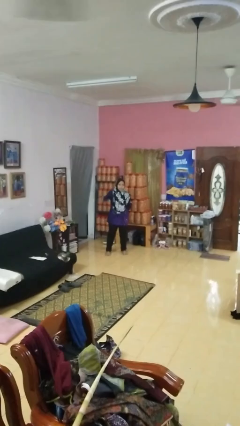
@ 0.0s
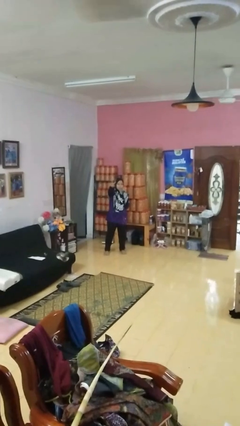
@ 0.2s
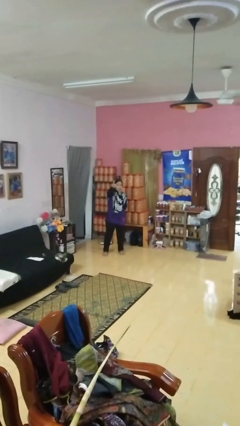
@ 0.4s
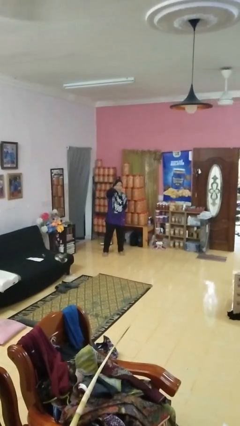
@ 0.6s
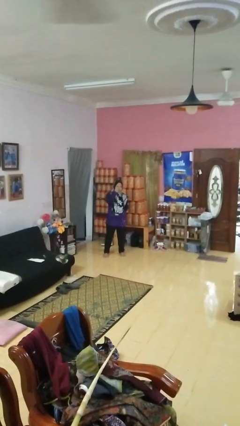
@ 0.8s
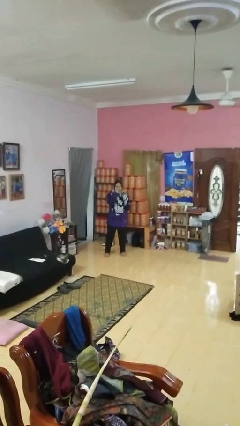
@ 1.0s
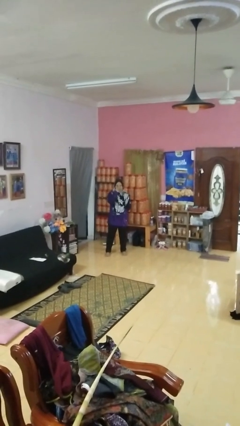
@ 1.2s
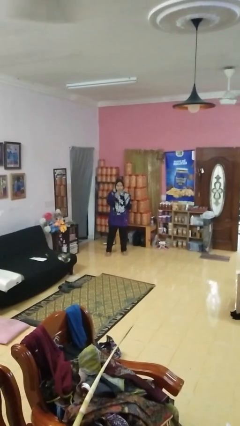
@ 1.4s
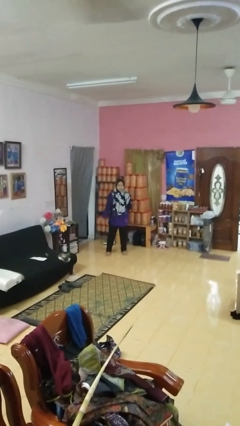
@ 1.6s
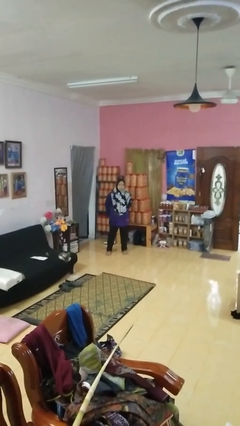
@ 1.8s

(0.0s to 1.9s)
person gestures watch closely

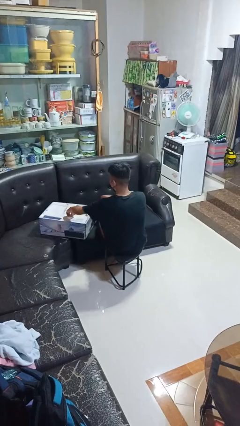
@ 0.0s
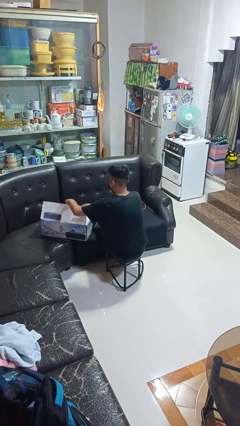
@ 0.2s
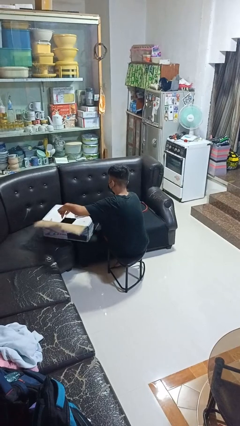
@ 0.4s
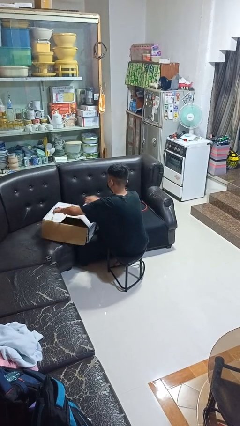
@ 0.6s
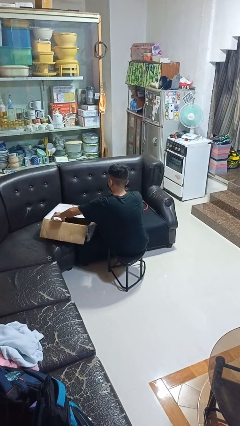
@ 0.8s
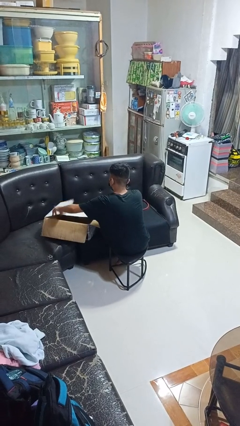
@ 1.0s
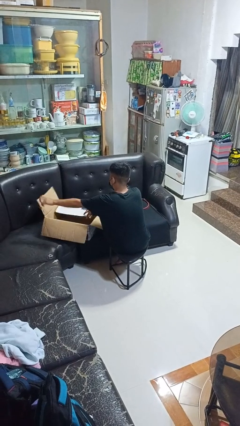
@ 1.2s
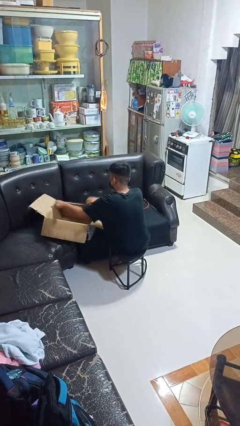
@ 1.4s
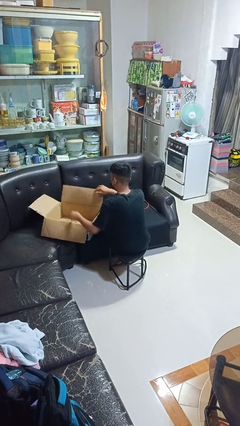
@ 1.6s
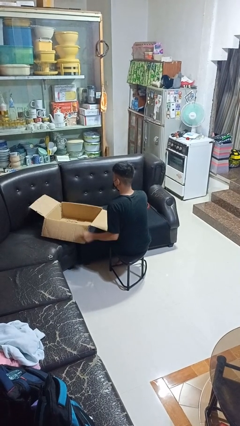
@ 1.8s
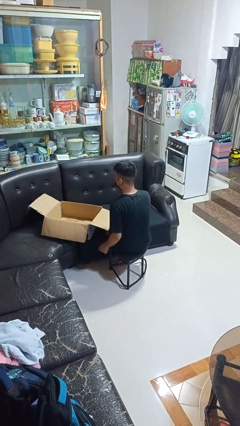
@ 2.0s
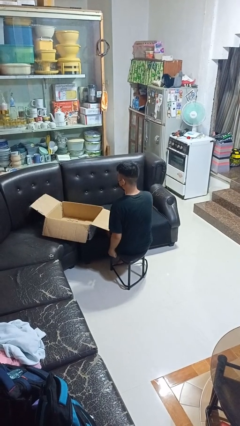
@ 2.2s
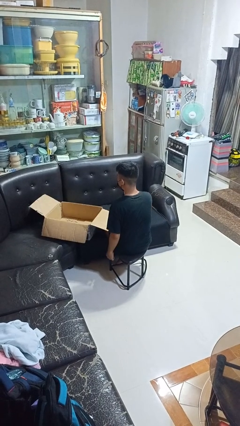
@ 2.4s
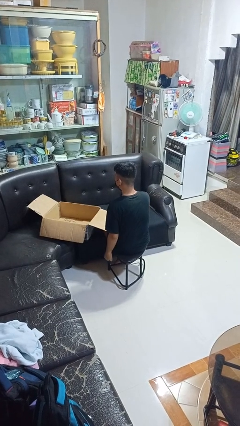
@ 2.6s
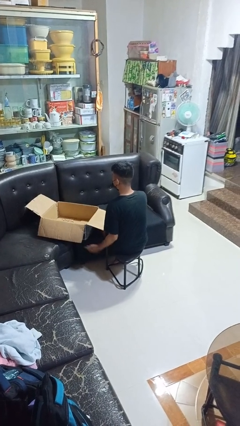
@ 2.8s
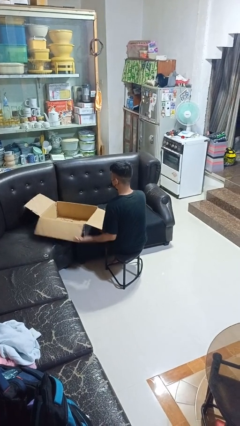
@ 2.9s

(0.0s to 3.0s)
person opens box

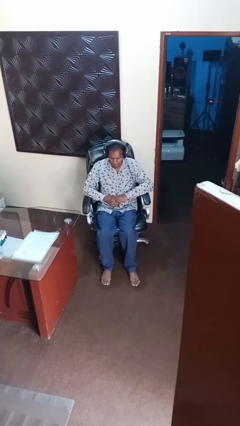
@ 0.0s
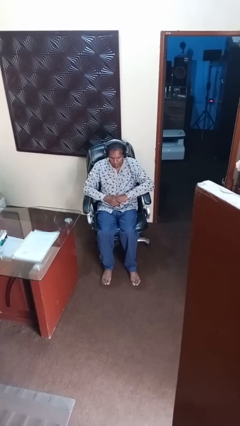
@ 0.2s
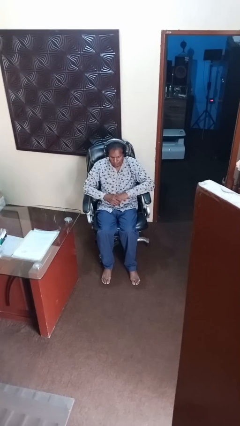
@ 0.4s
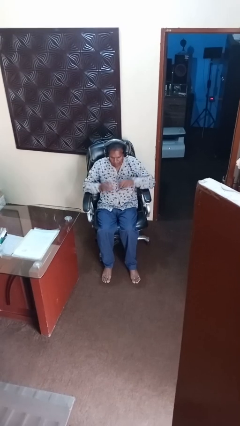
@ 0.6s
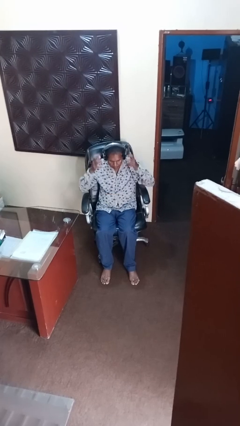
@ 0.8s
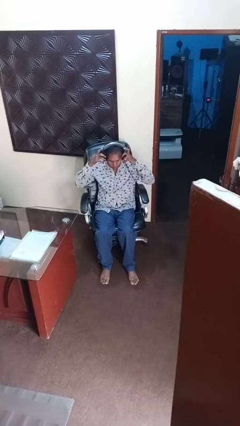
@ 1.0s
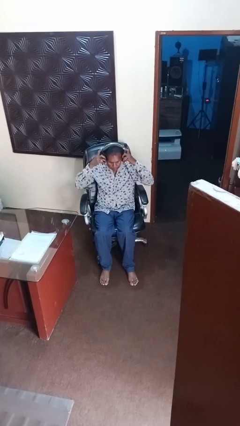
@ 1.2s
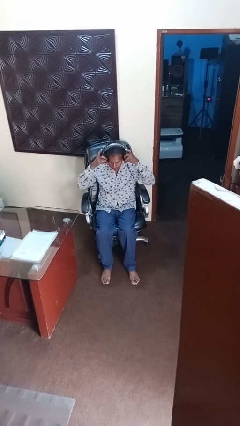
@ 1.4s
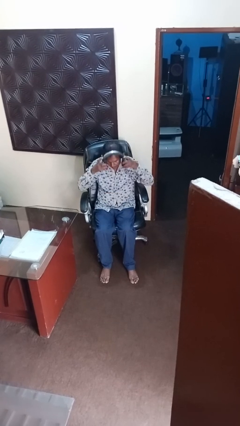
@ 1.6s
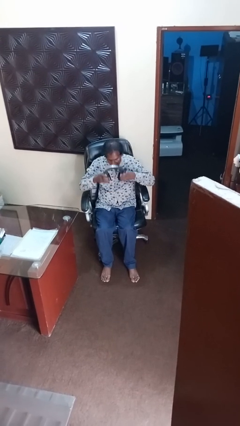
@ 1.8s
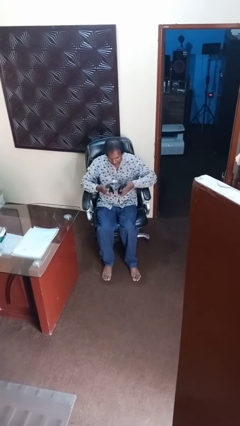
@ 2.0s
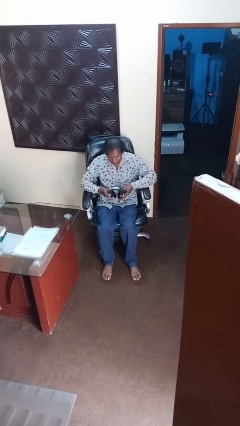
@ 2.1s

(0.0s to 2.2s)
person takes off headphones

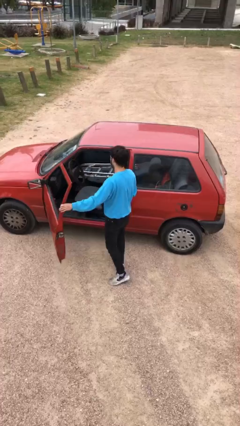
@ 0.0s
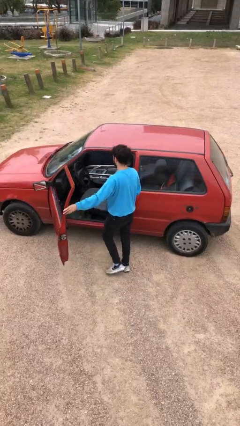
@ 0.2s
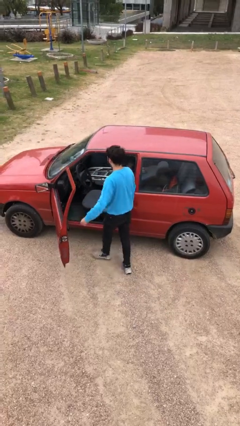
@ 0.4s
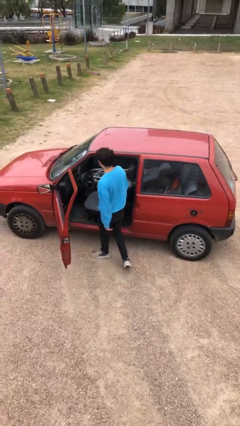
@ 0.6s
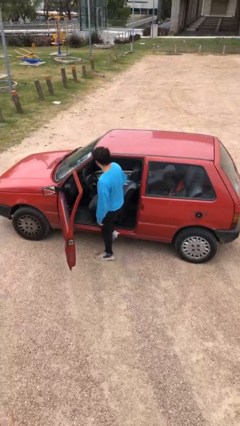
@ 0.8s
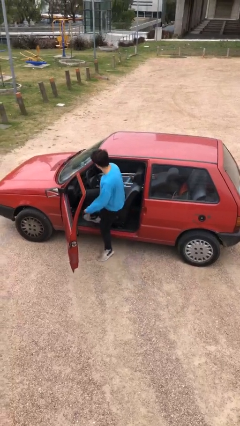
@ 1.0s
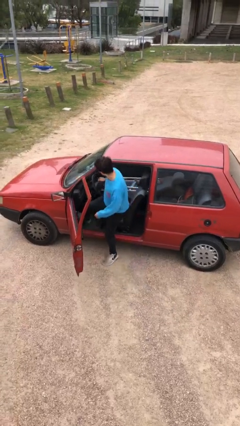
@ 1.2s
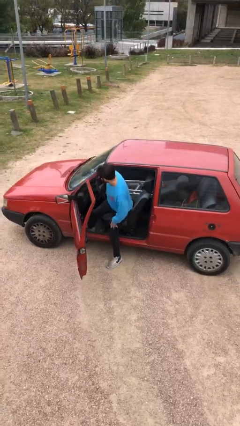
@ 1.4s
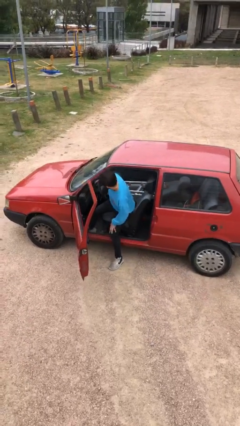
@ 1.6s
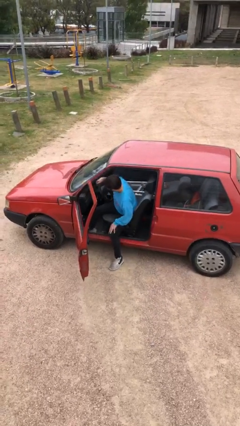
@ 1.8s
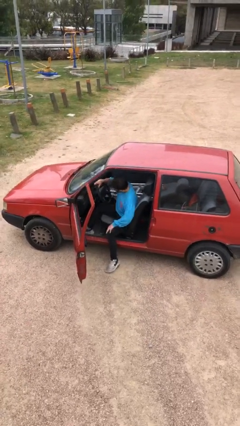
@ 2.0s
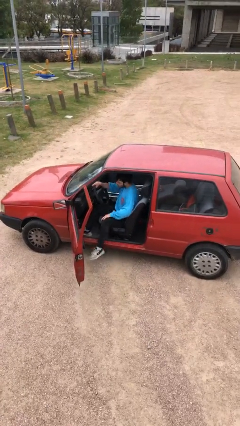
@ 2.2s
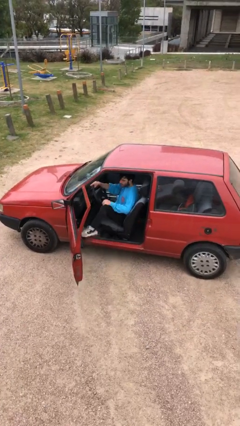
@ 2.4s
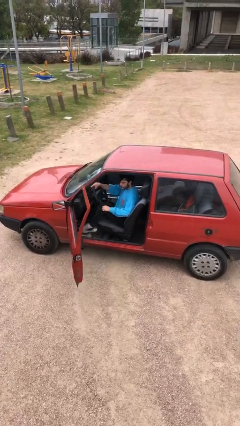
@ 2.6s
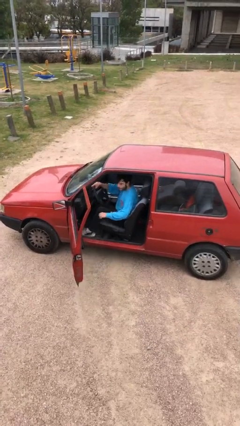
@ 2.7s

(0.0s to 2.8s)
person enters car

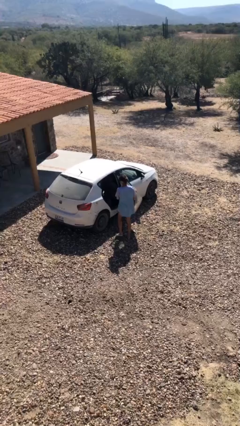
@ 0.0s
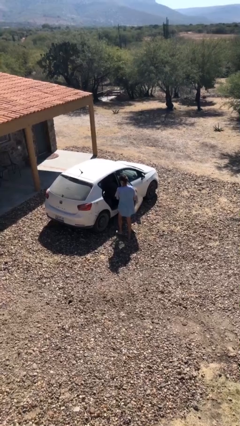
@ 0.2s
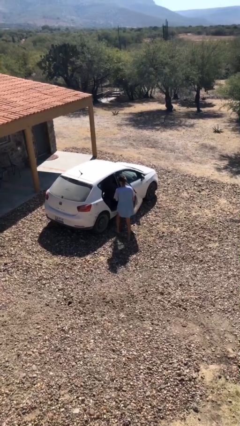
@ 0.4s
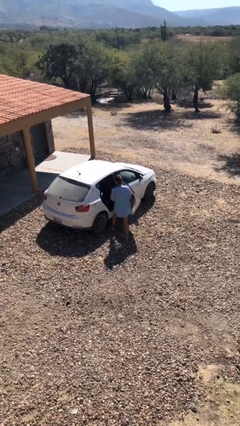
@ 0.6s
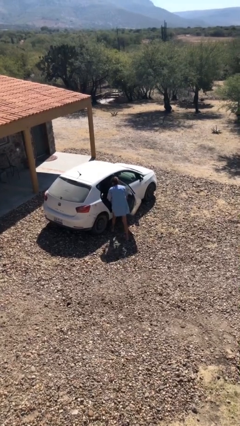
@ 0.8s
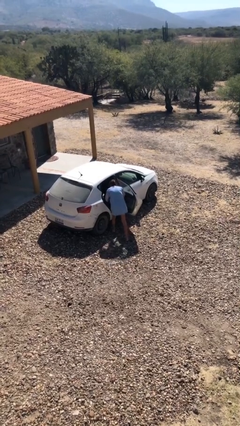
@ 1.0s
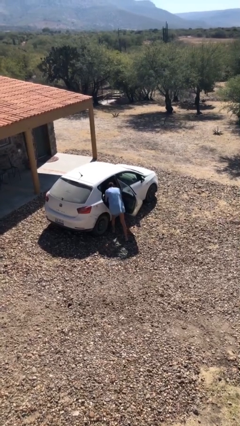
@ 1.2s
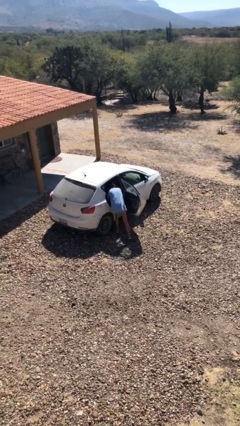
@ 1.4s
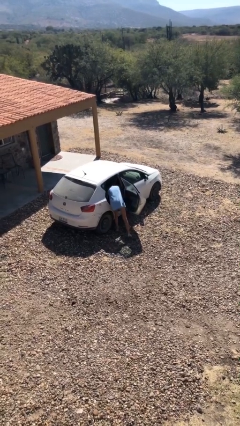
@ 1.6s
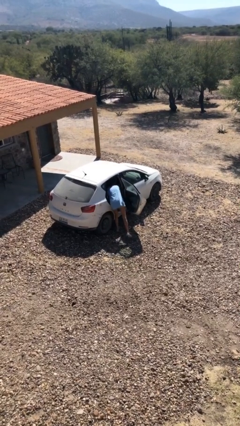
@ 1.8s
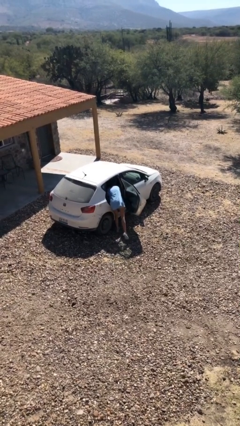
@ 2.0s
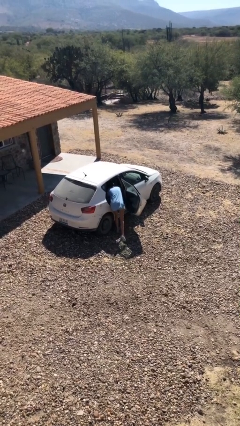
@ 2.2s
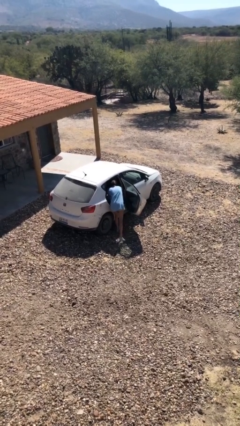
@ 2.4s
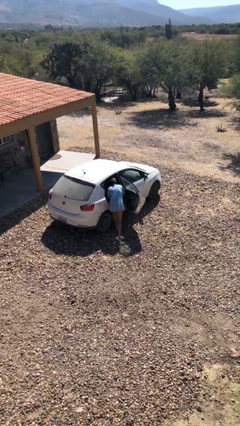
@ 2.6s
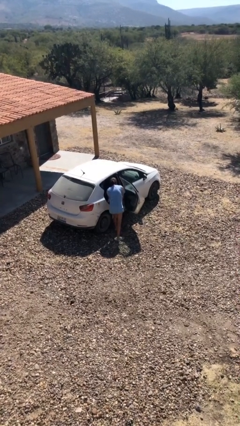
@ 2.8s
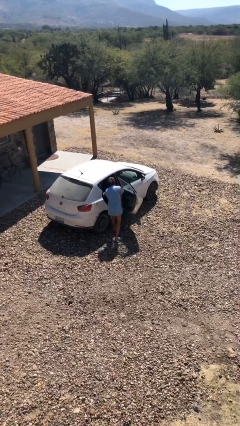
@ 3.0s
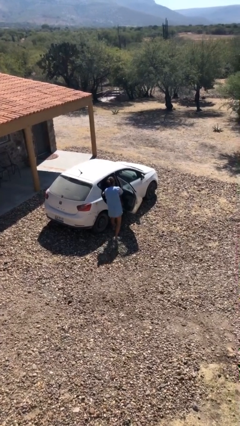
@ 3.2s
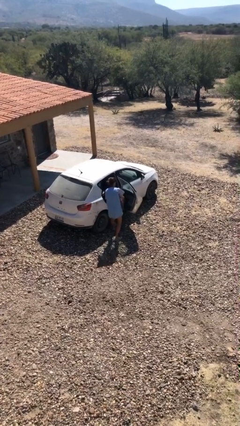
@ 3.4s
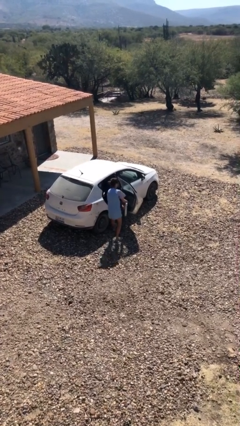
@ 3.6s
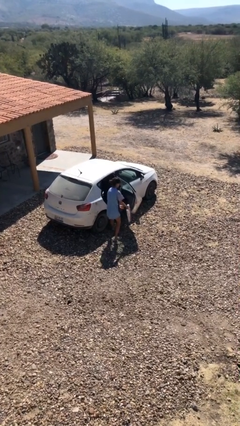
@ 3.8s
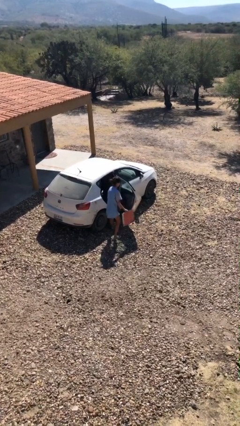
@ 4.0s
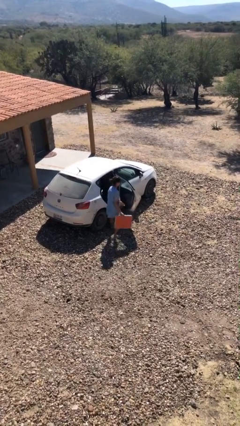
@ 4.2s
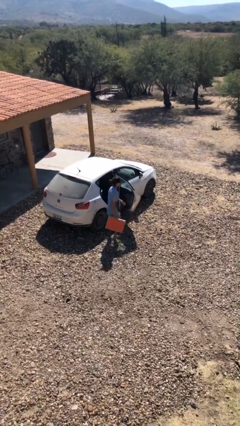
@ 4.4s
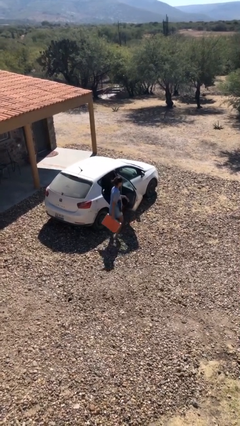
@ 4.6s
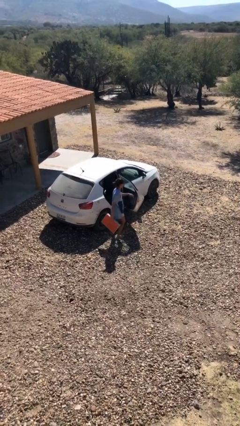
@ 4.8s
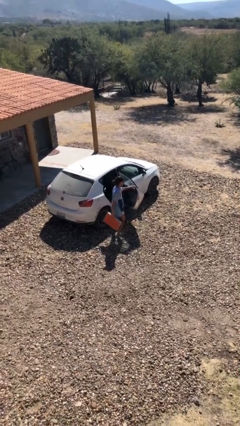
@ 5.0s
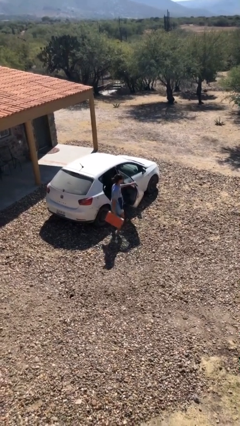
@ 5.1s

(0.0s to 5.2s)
person unloads car

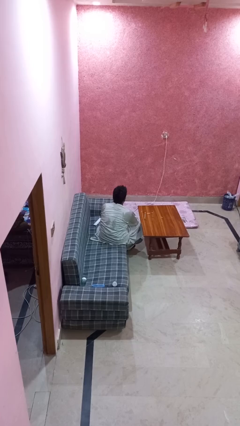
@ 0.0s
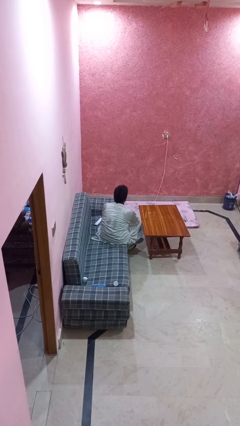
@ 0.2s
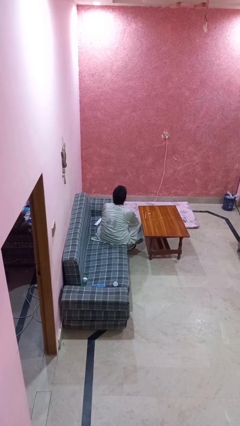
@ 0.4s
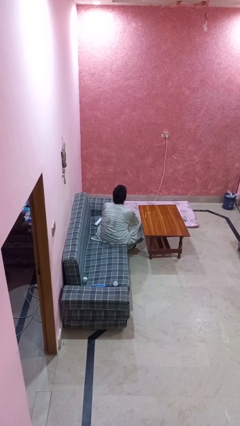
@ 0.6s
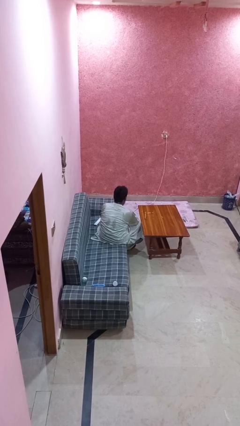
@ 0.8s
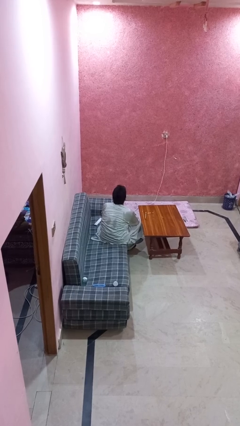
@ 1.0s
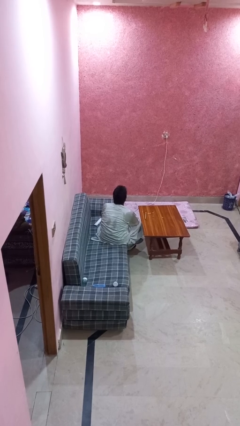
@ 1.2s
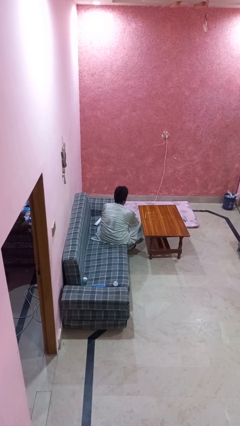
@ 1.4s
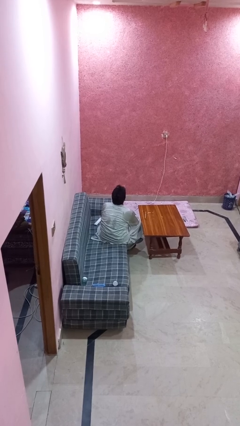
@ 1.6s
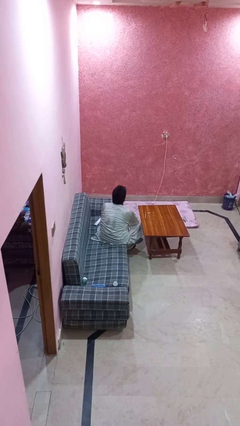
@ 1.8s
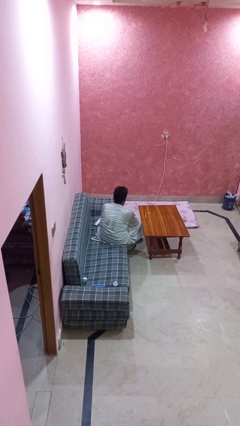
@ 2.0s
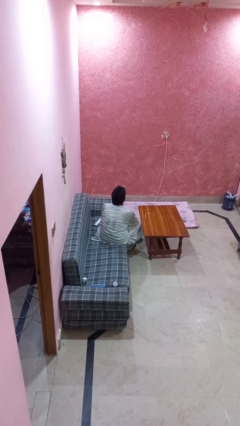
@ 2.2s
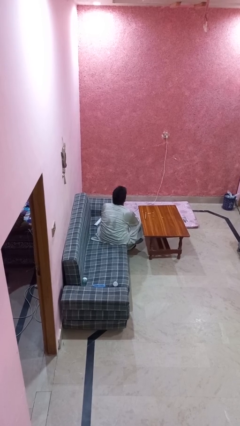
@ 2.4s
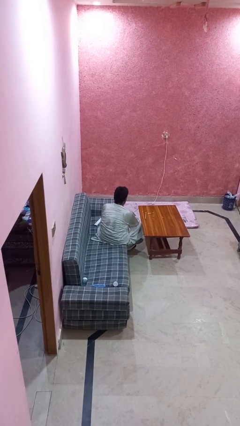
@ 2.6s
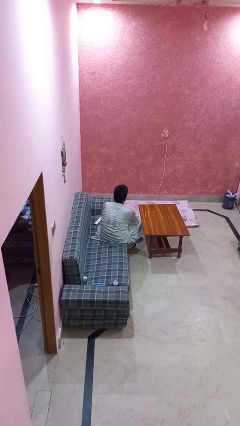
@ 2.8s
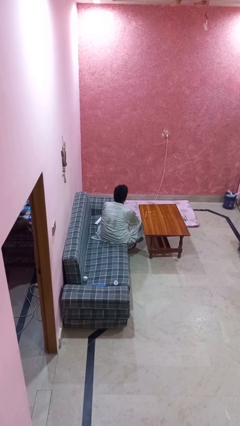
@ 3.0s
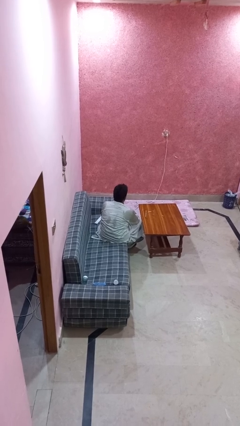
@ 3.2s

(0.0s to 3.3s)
person nods head
